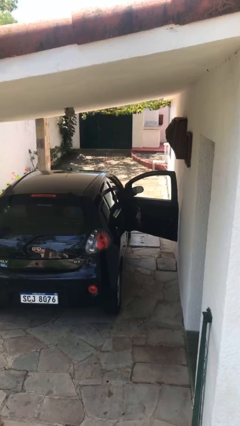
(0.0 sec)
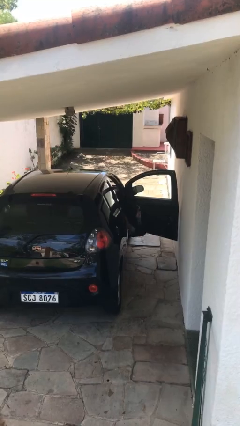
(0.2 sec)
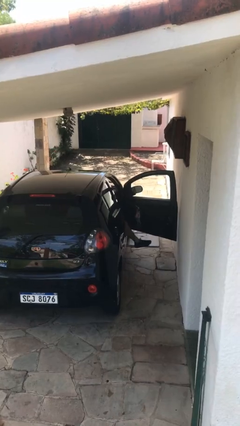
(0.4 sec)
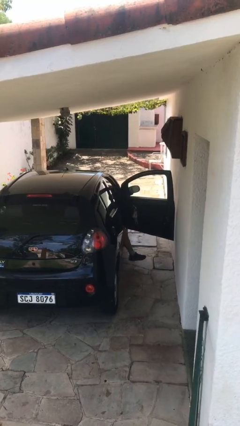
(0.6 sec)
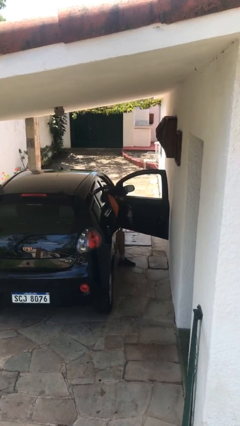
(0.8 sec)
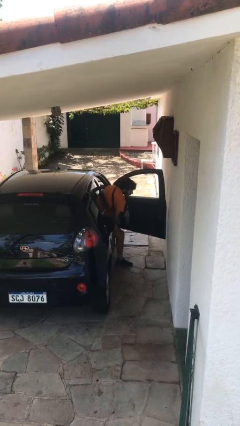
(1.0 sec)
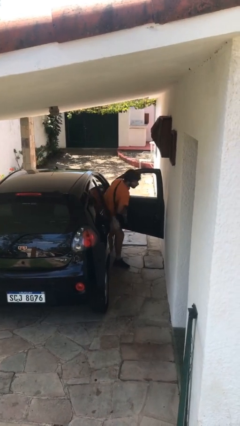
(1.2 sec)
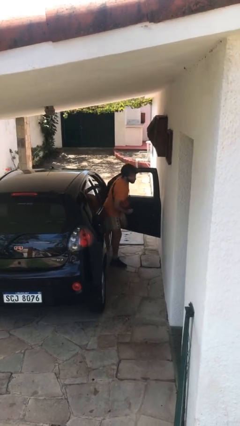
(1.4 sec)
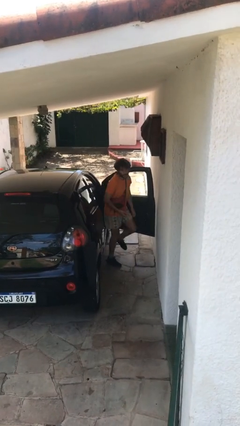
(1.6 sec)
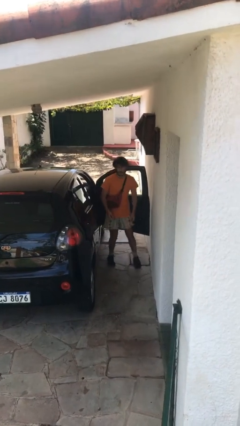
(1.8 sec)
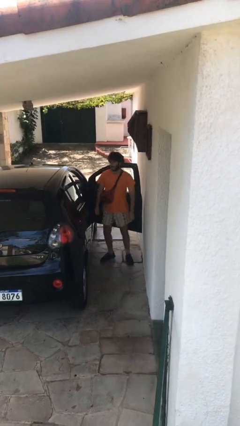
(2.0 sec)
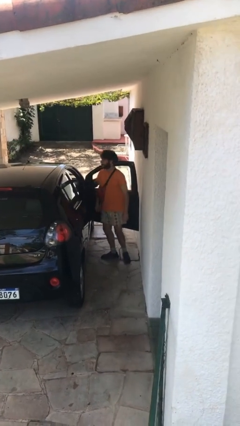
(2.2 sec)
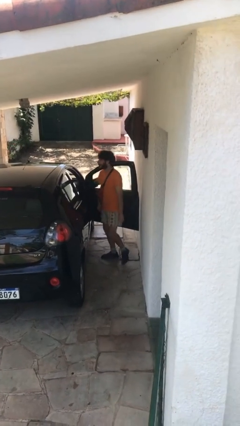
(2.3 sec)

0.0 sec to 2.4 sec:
person exits car

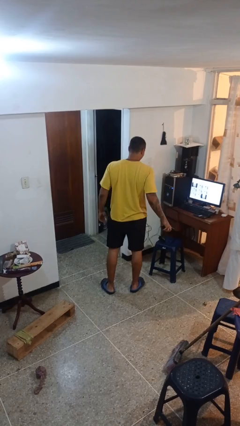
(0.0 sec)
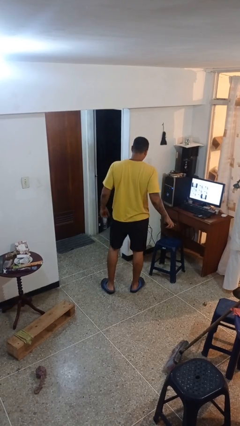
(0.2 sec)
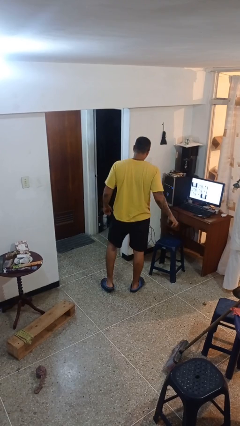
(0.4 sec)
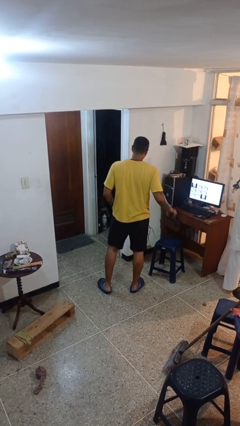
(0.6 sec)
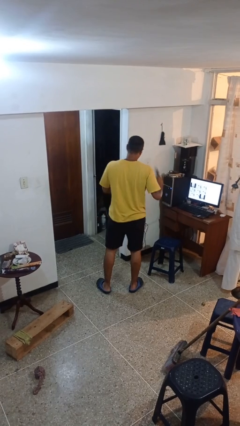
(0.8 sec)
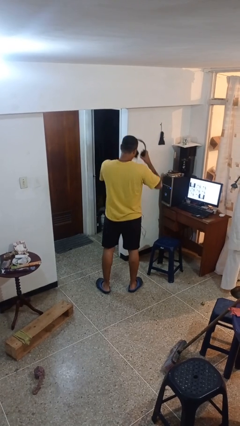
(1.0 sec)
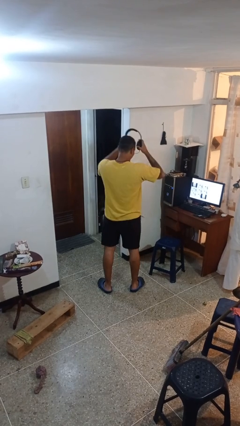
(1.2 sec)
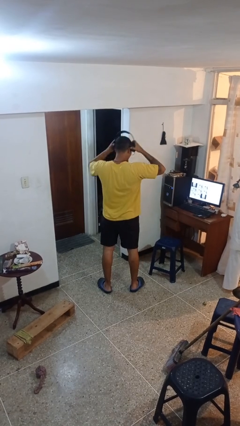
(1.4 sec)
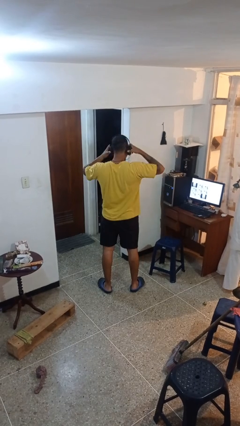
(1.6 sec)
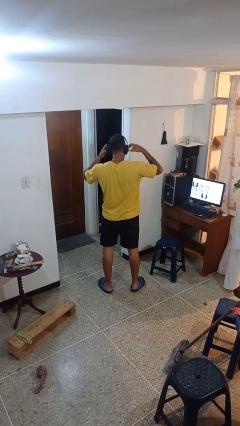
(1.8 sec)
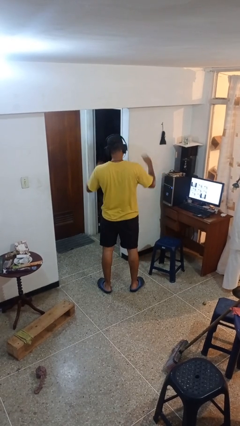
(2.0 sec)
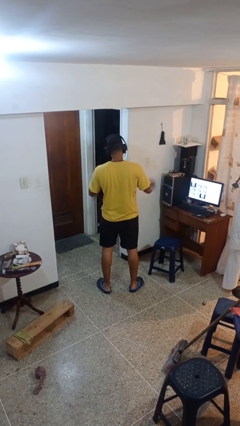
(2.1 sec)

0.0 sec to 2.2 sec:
person puts on headphones

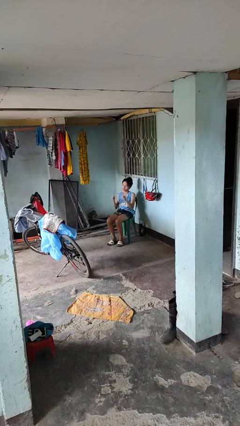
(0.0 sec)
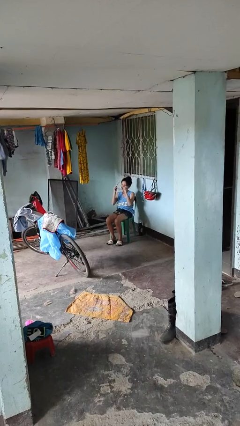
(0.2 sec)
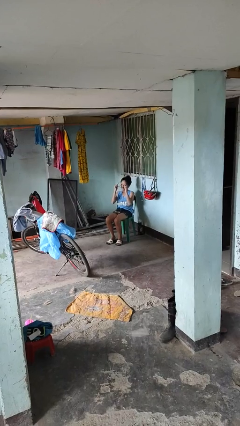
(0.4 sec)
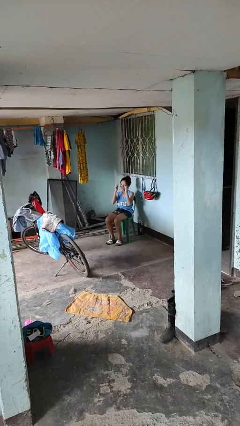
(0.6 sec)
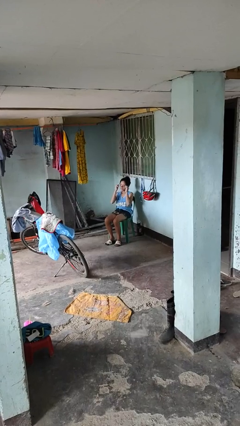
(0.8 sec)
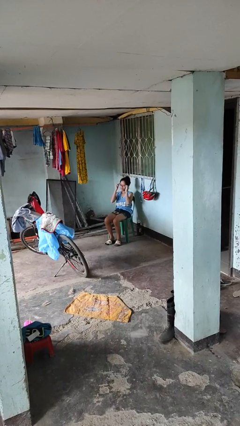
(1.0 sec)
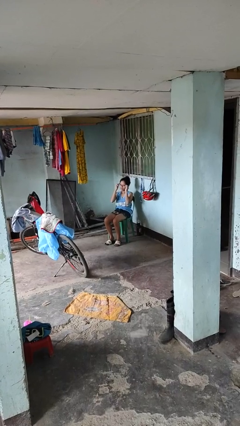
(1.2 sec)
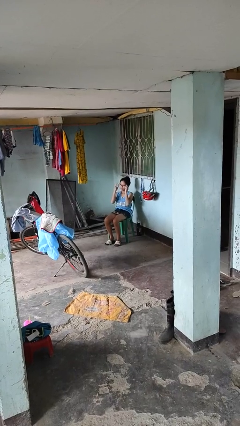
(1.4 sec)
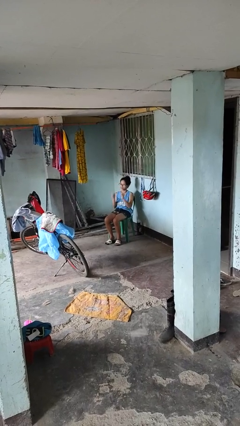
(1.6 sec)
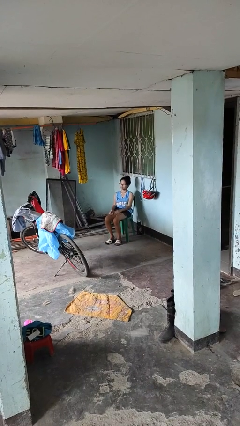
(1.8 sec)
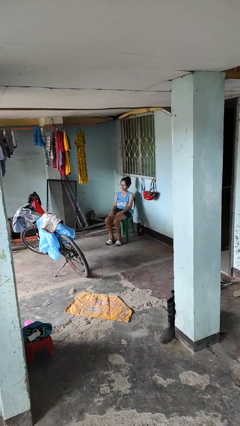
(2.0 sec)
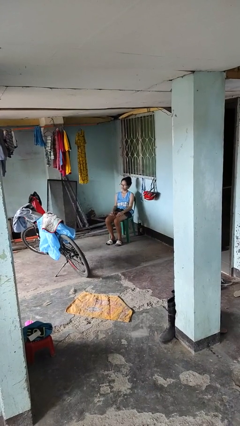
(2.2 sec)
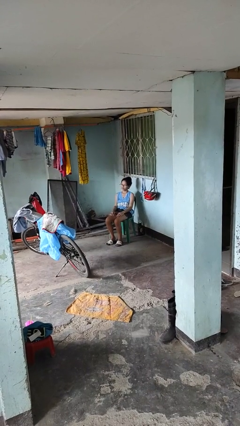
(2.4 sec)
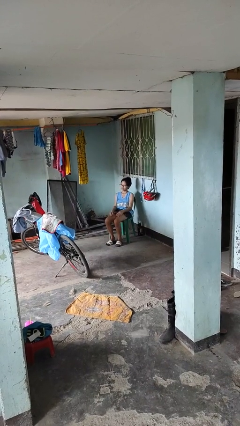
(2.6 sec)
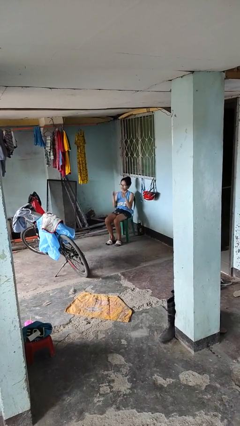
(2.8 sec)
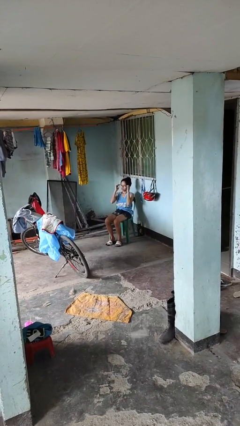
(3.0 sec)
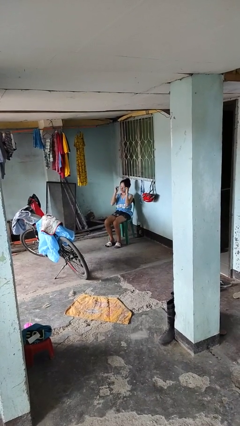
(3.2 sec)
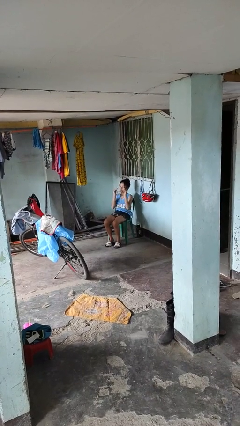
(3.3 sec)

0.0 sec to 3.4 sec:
person puts on glasses

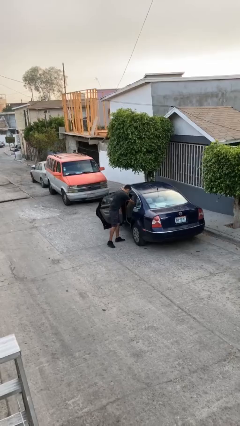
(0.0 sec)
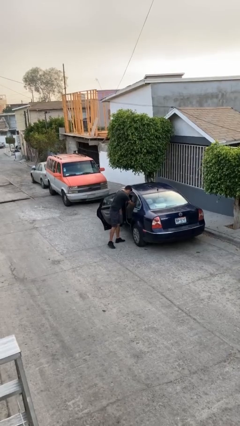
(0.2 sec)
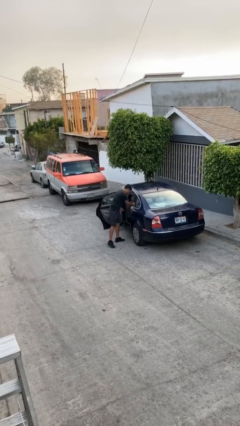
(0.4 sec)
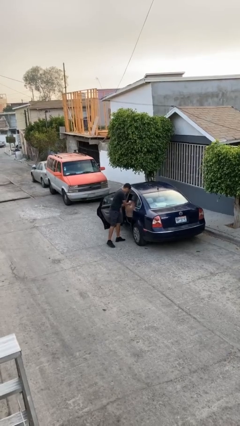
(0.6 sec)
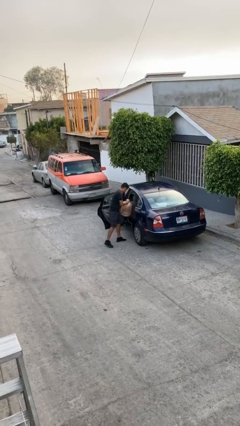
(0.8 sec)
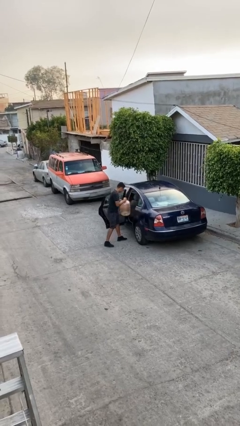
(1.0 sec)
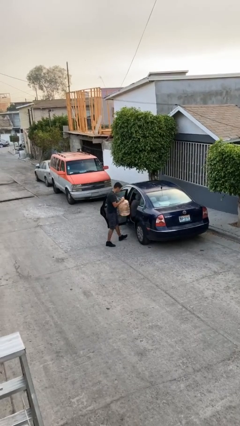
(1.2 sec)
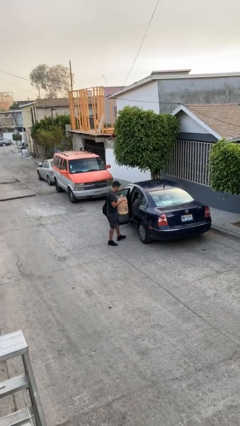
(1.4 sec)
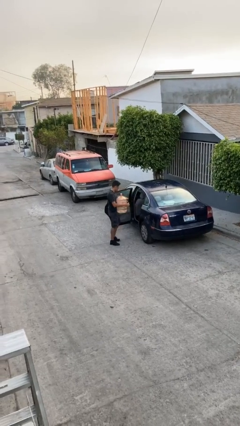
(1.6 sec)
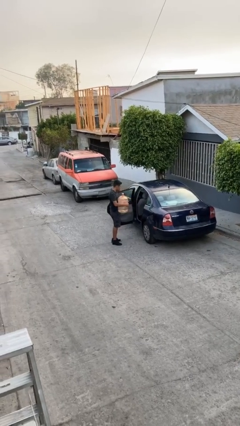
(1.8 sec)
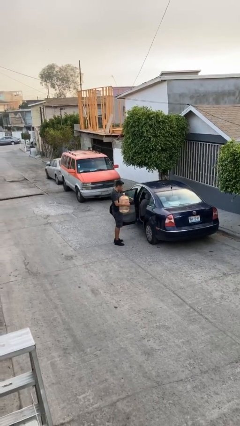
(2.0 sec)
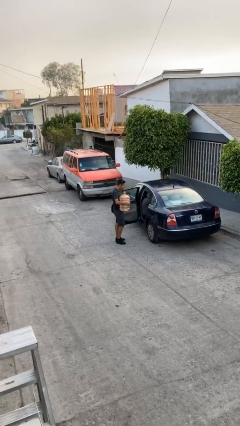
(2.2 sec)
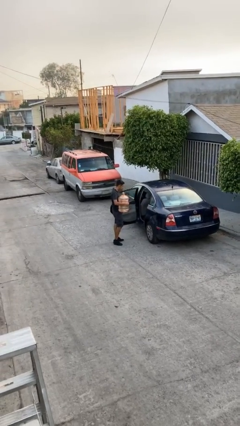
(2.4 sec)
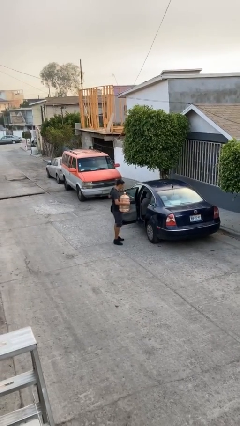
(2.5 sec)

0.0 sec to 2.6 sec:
person unloads car

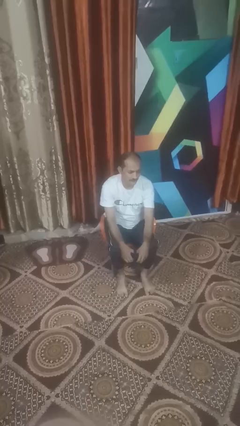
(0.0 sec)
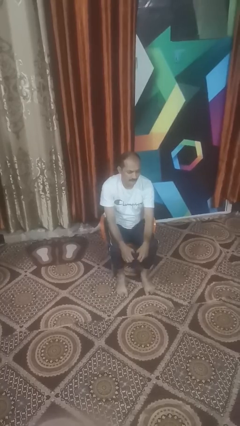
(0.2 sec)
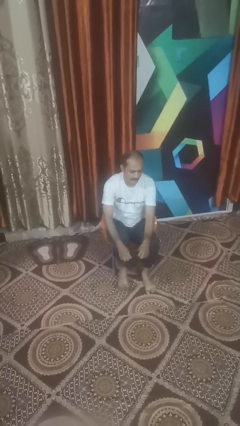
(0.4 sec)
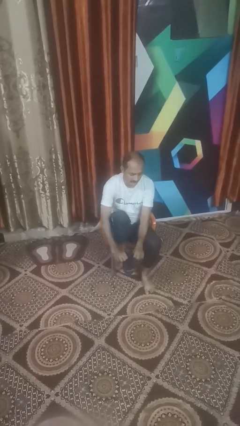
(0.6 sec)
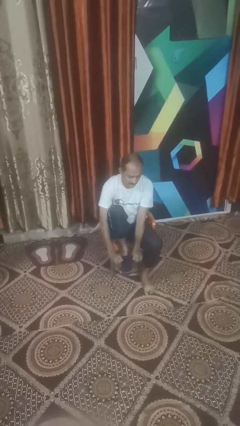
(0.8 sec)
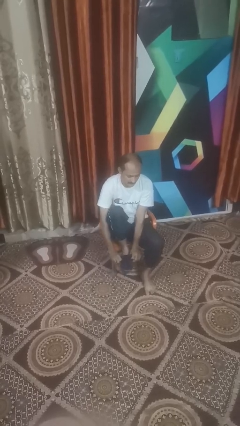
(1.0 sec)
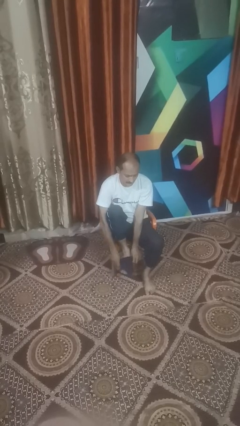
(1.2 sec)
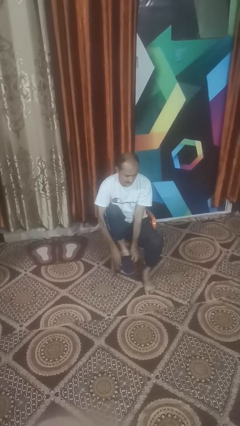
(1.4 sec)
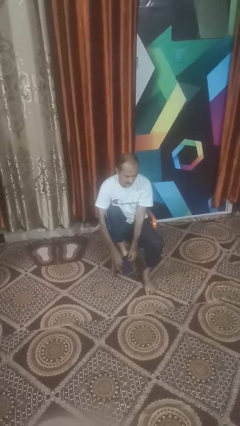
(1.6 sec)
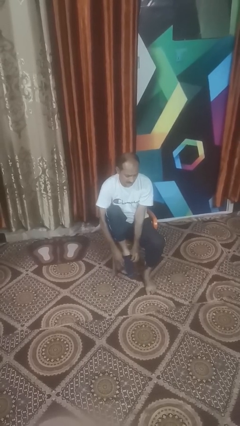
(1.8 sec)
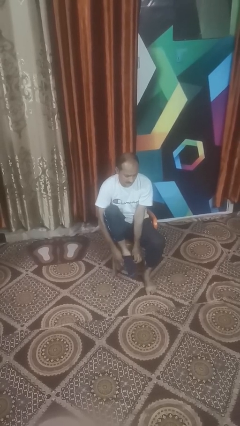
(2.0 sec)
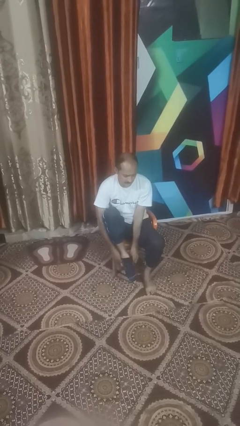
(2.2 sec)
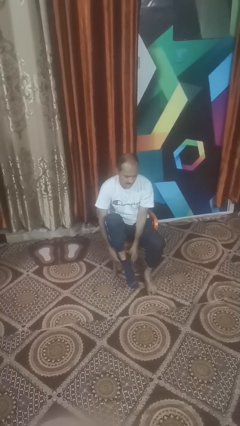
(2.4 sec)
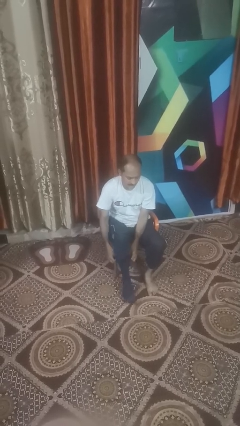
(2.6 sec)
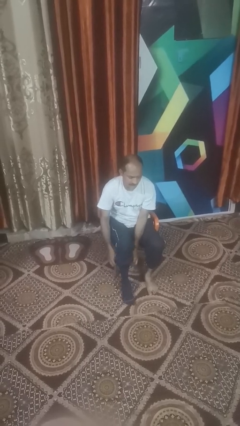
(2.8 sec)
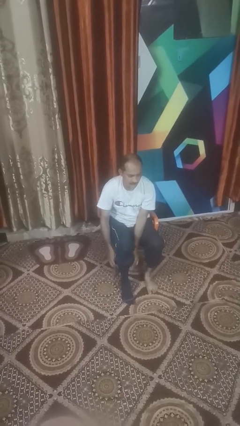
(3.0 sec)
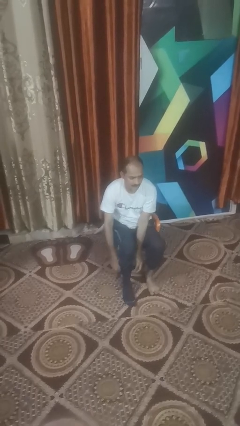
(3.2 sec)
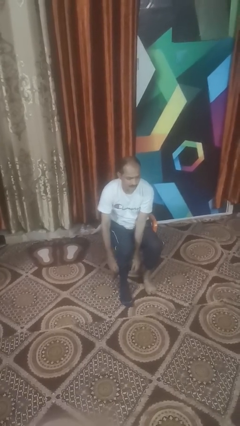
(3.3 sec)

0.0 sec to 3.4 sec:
person puts on socks

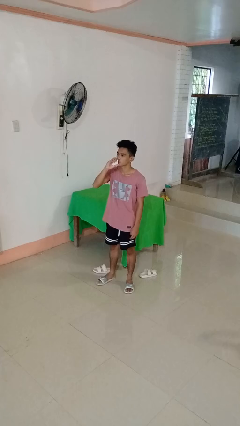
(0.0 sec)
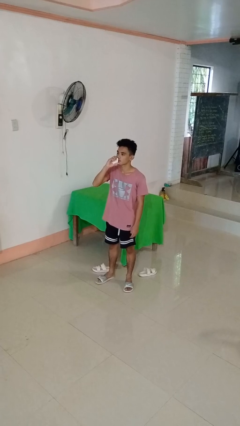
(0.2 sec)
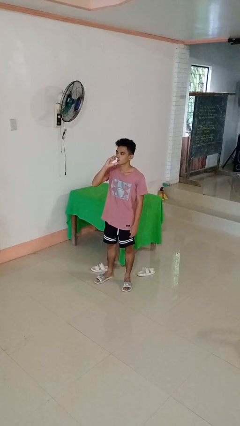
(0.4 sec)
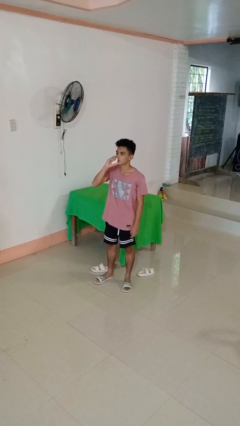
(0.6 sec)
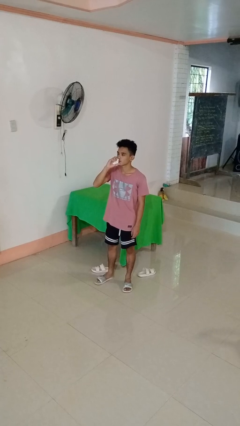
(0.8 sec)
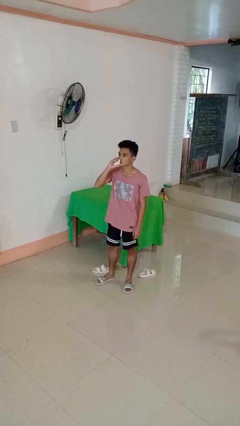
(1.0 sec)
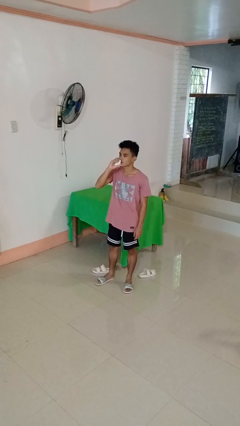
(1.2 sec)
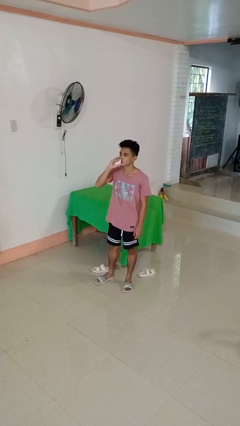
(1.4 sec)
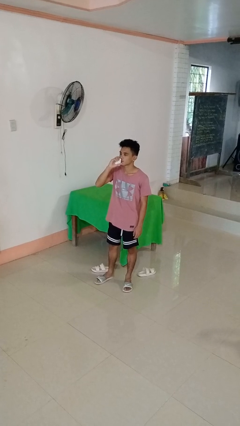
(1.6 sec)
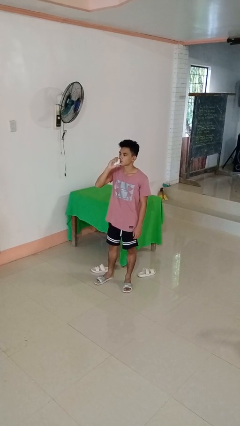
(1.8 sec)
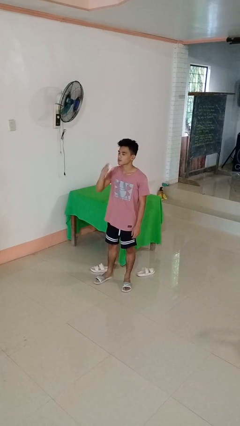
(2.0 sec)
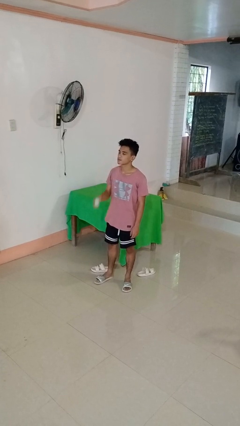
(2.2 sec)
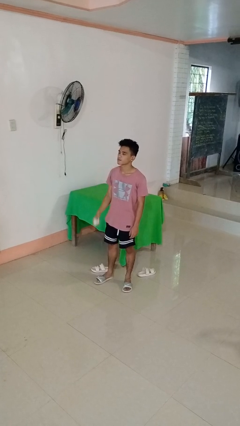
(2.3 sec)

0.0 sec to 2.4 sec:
person vapes

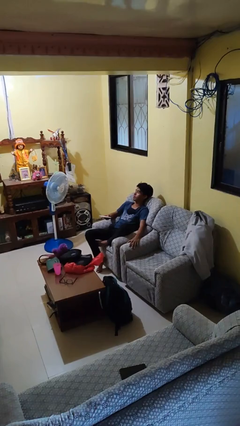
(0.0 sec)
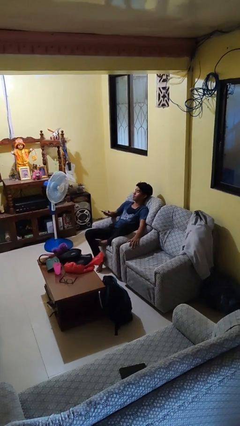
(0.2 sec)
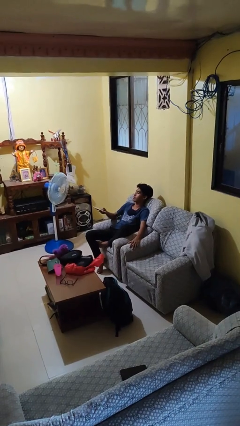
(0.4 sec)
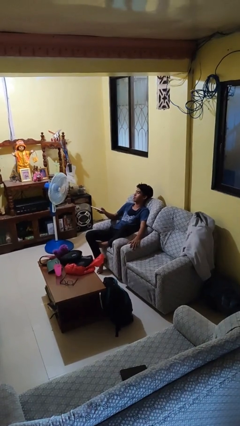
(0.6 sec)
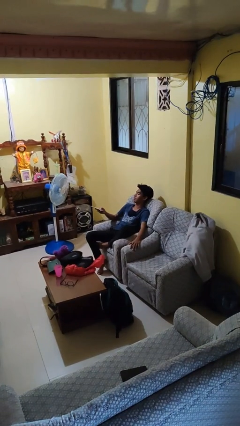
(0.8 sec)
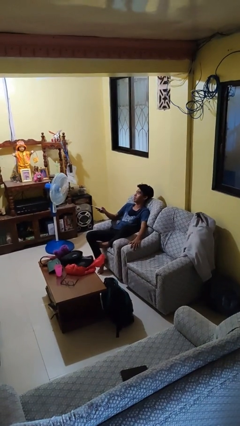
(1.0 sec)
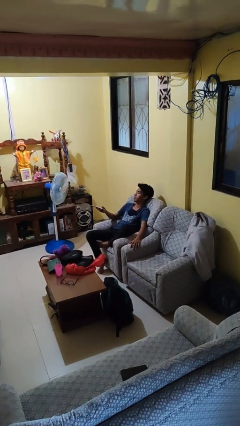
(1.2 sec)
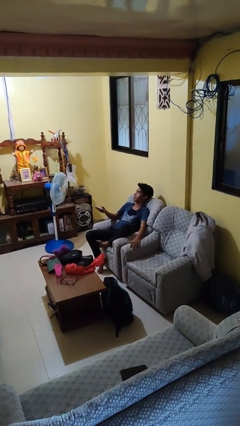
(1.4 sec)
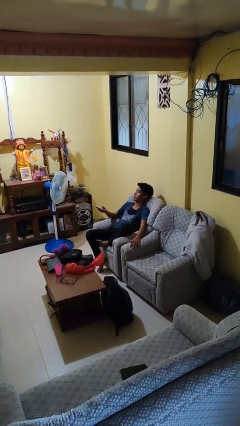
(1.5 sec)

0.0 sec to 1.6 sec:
person uses television remote
